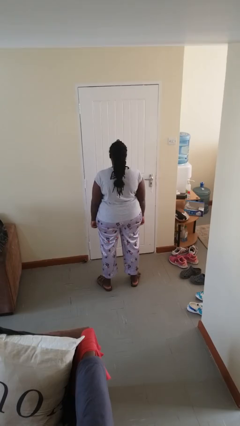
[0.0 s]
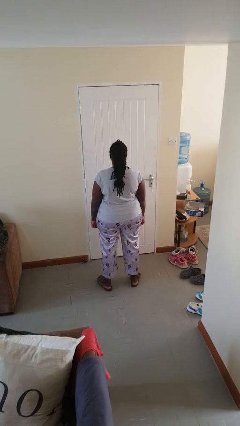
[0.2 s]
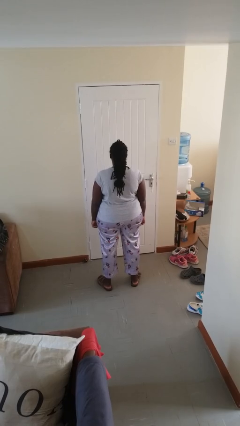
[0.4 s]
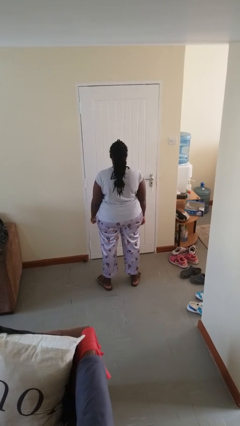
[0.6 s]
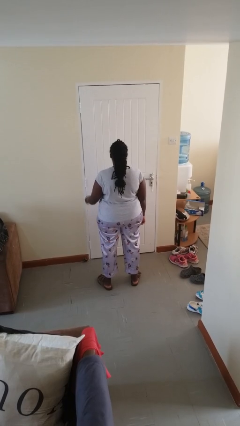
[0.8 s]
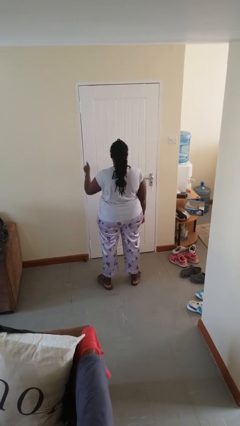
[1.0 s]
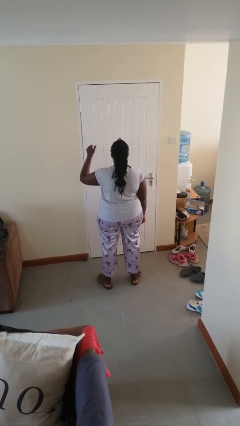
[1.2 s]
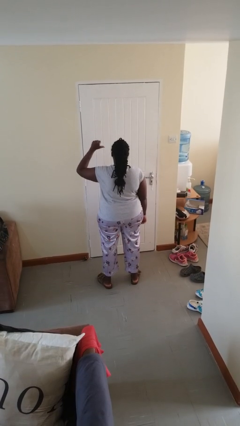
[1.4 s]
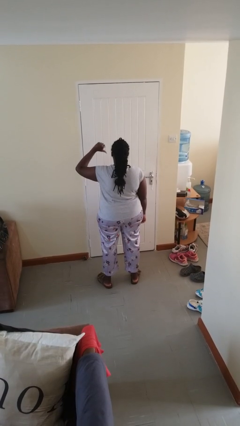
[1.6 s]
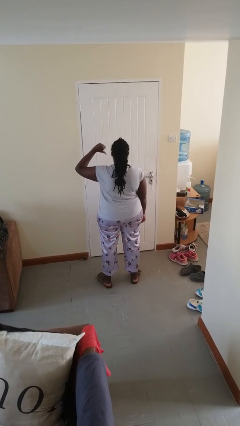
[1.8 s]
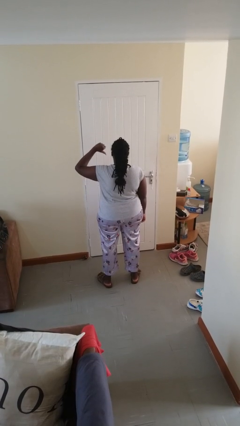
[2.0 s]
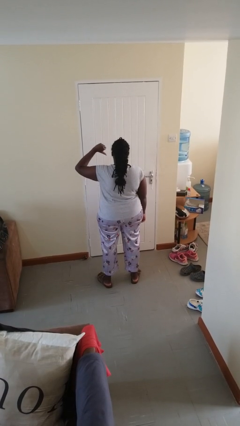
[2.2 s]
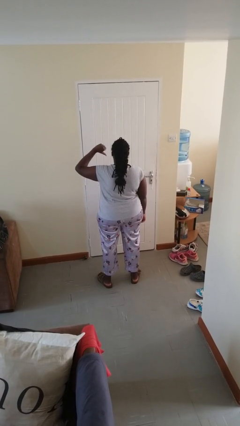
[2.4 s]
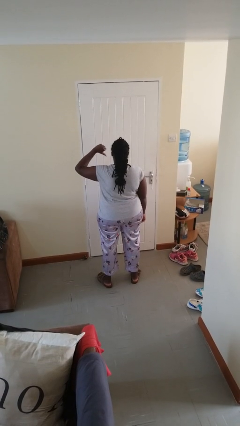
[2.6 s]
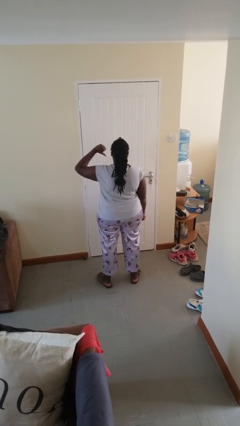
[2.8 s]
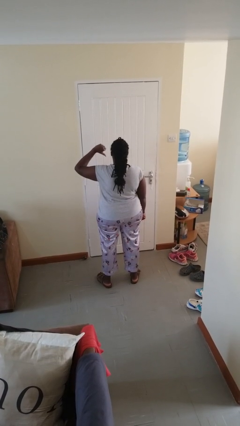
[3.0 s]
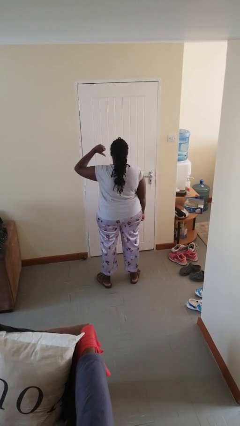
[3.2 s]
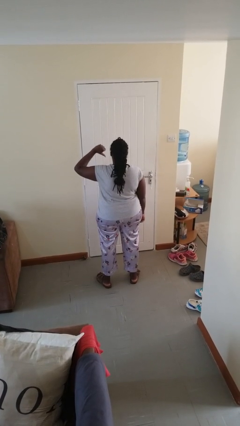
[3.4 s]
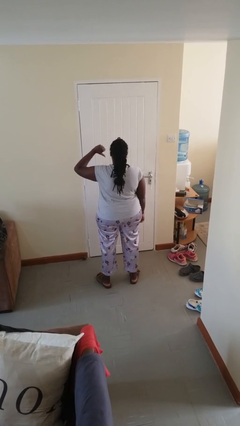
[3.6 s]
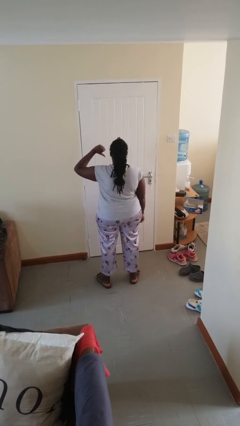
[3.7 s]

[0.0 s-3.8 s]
person gestures thumbs down

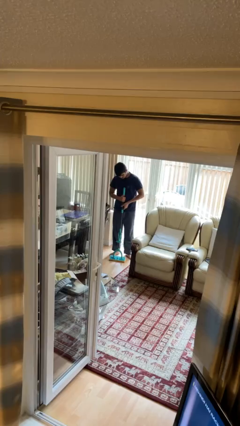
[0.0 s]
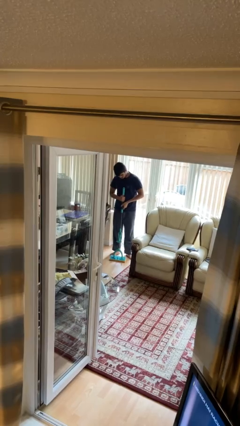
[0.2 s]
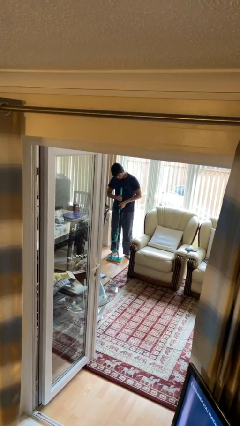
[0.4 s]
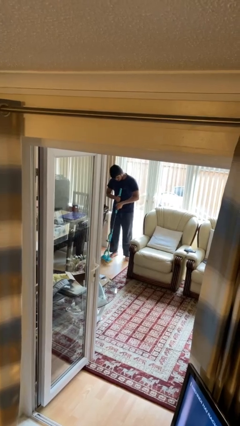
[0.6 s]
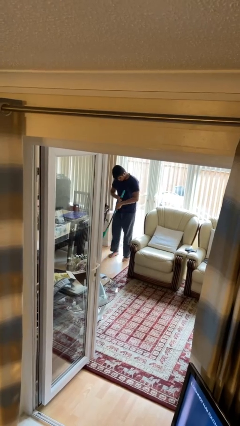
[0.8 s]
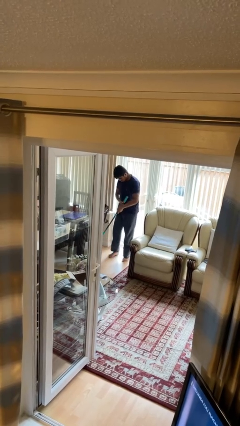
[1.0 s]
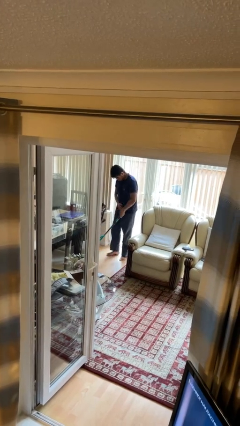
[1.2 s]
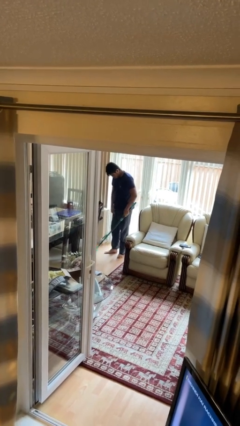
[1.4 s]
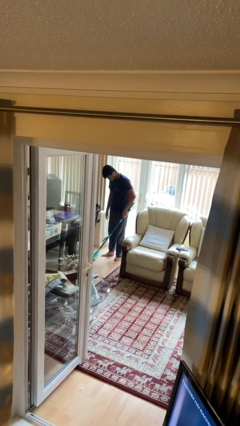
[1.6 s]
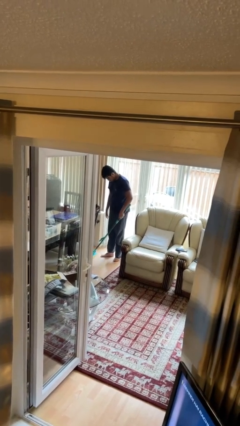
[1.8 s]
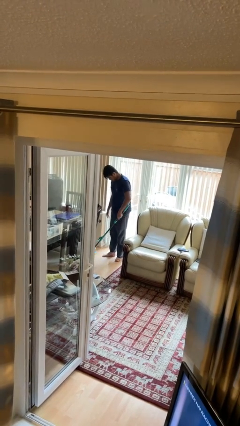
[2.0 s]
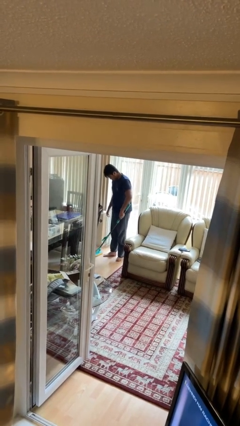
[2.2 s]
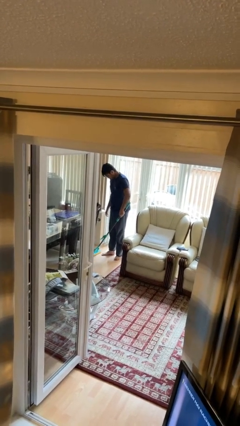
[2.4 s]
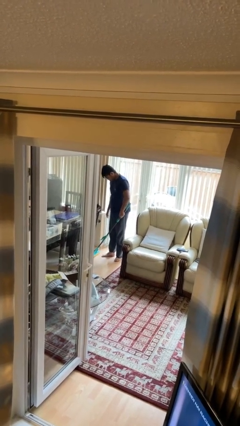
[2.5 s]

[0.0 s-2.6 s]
person mops

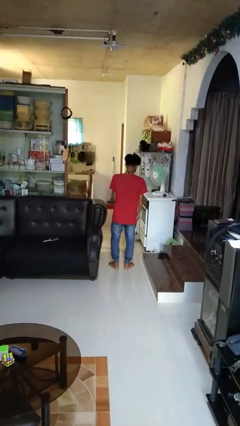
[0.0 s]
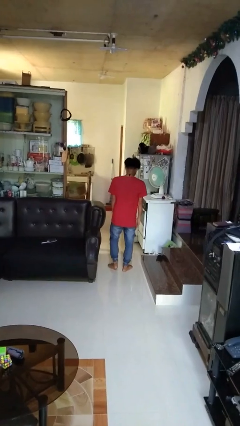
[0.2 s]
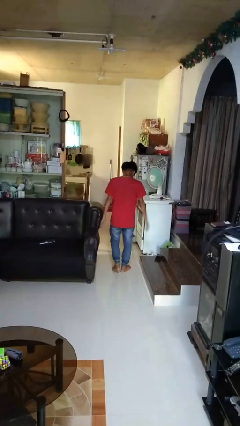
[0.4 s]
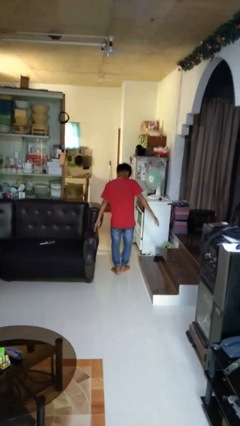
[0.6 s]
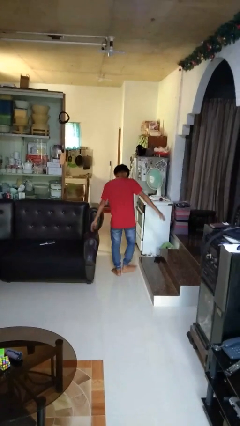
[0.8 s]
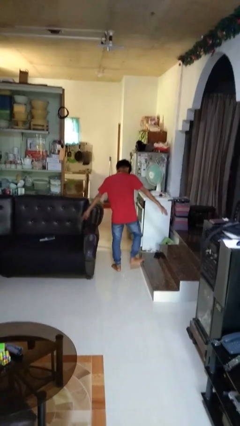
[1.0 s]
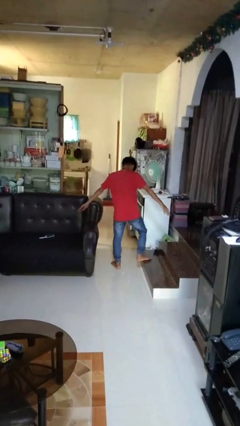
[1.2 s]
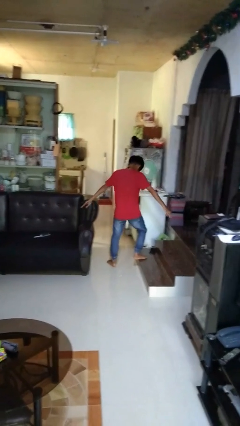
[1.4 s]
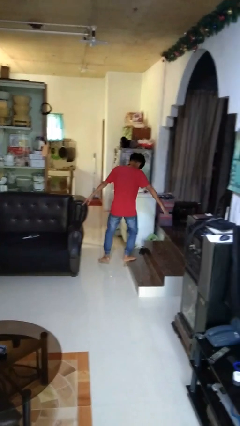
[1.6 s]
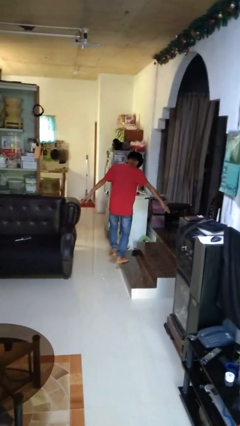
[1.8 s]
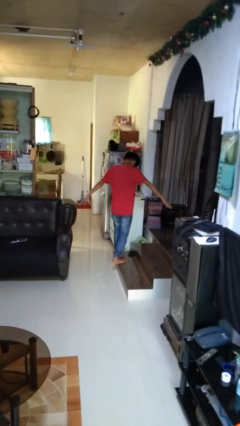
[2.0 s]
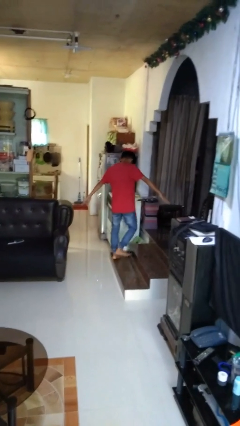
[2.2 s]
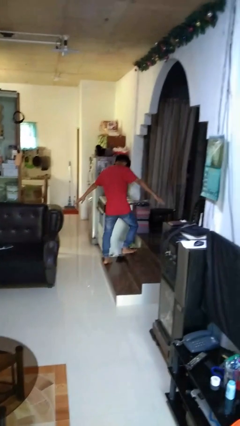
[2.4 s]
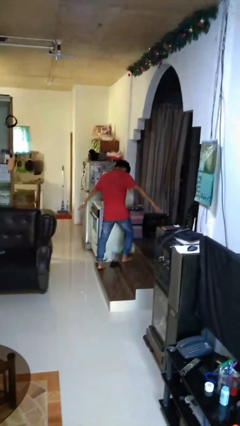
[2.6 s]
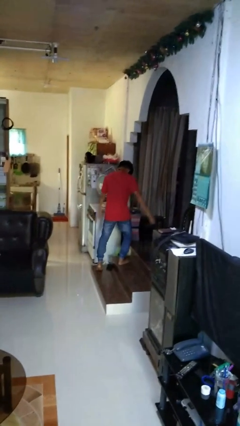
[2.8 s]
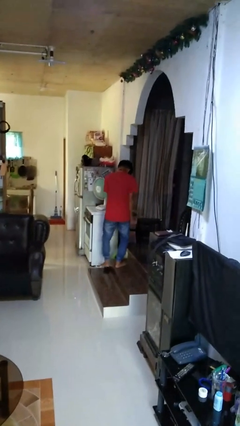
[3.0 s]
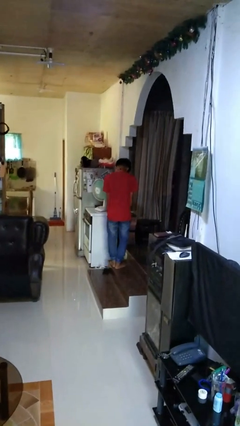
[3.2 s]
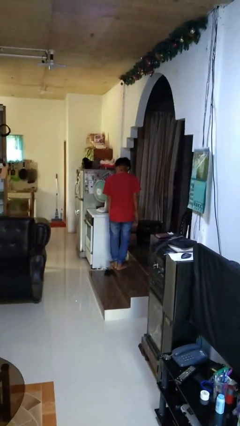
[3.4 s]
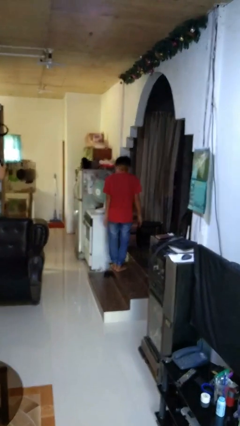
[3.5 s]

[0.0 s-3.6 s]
person walks tiptoe

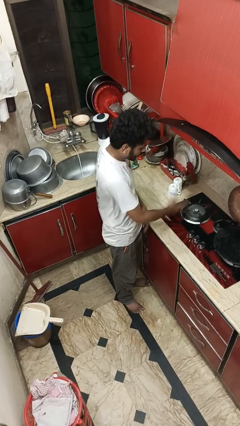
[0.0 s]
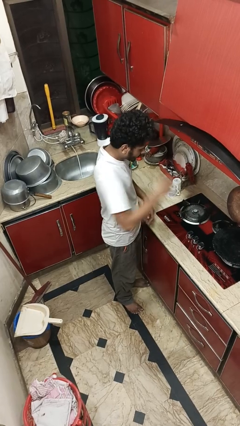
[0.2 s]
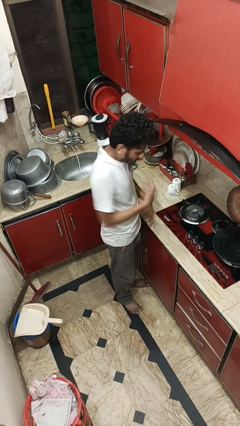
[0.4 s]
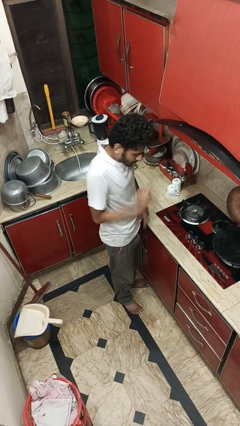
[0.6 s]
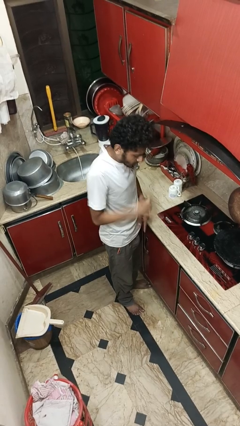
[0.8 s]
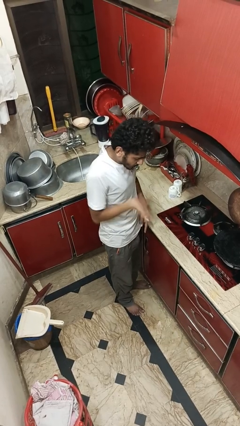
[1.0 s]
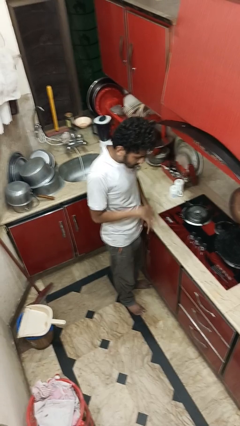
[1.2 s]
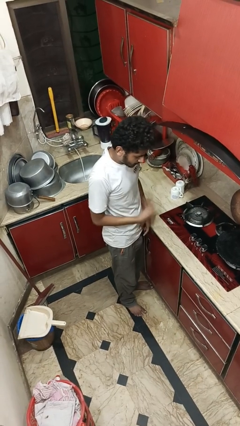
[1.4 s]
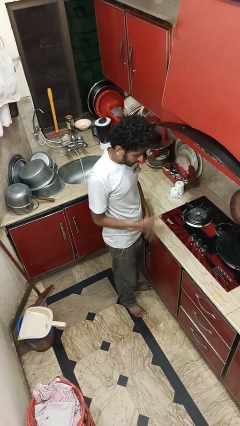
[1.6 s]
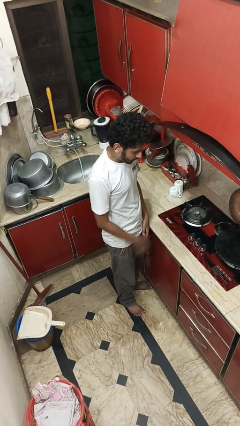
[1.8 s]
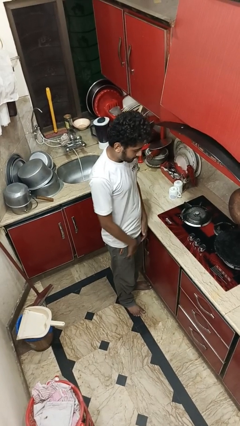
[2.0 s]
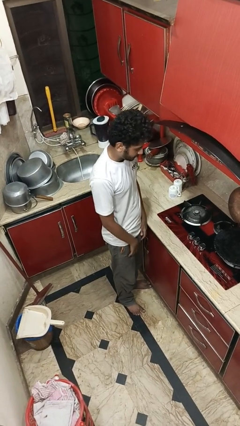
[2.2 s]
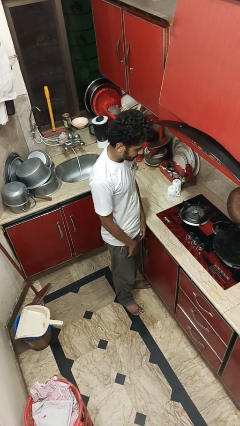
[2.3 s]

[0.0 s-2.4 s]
person burns hand

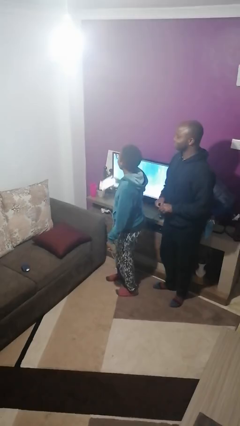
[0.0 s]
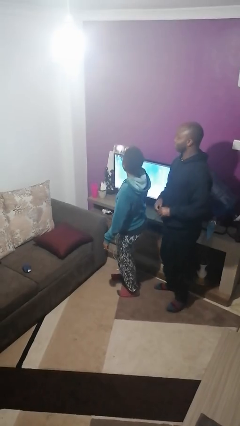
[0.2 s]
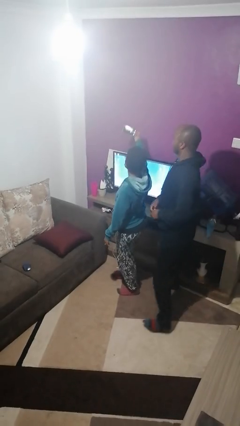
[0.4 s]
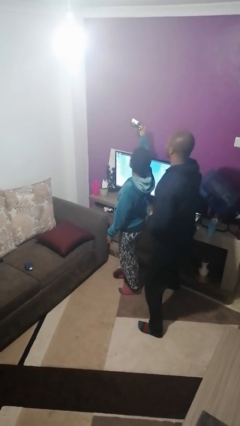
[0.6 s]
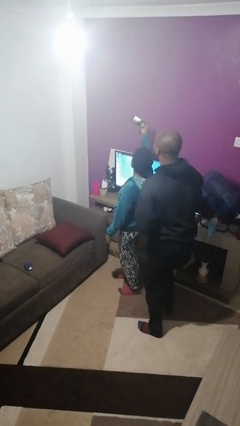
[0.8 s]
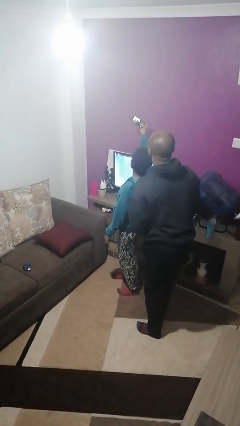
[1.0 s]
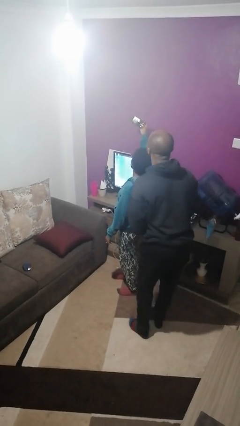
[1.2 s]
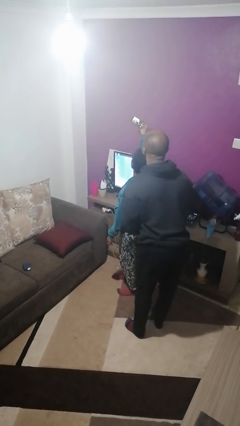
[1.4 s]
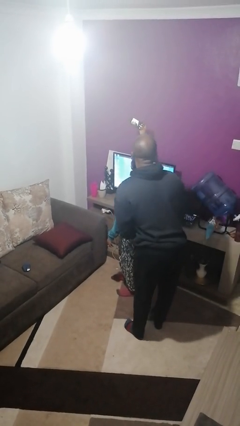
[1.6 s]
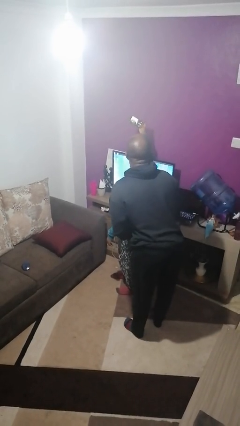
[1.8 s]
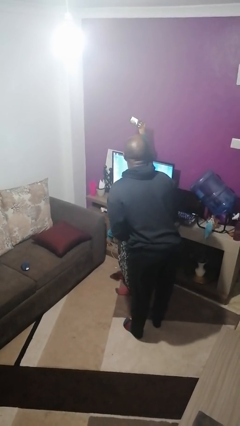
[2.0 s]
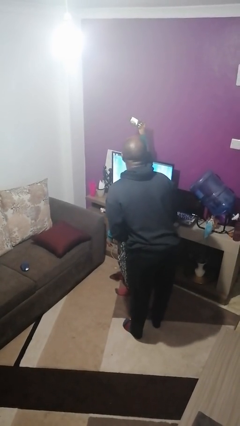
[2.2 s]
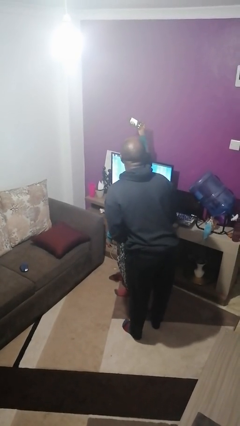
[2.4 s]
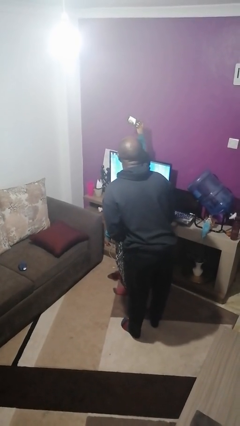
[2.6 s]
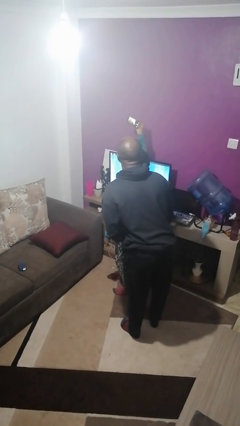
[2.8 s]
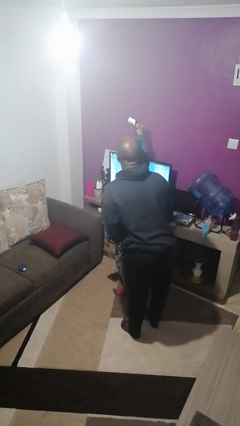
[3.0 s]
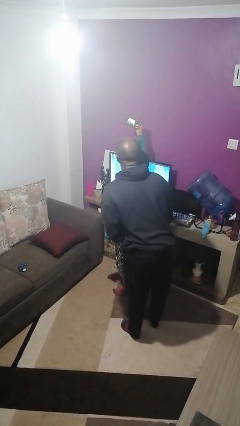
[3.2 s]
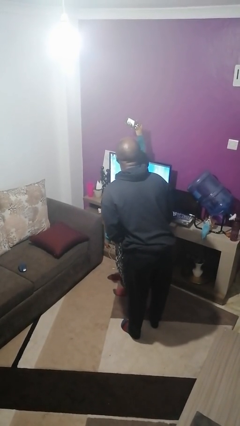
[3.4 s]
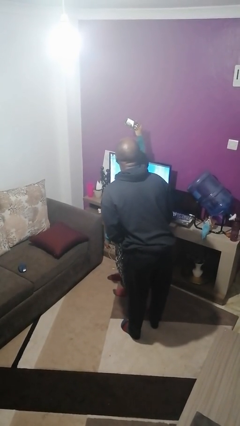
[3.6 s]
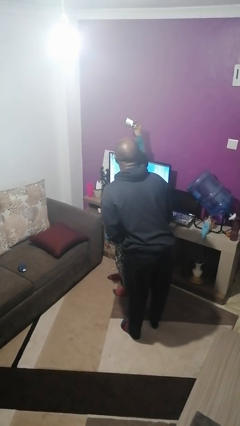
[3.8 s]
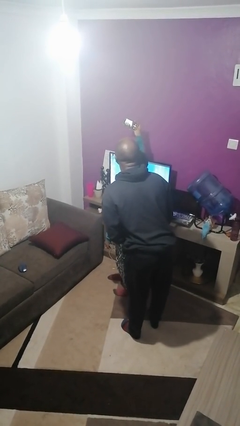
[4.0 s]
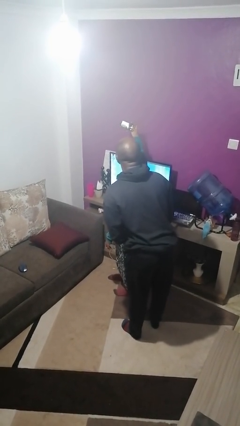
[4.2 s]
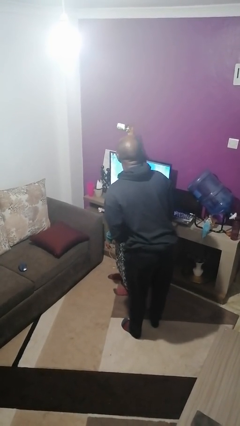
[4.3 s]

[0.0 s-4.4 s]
person takes selfie with person

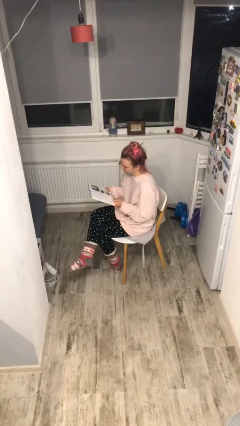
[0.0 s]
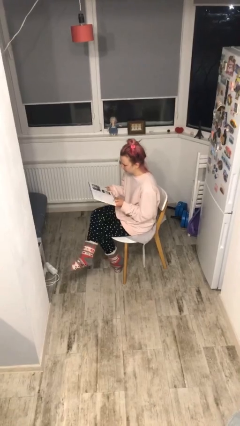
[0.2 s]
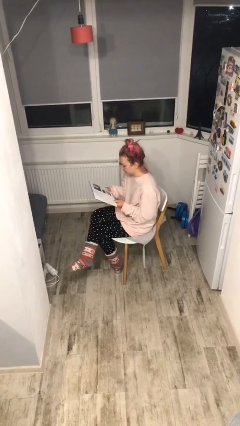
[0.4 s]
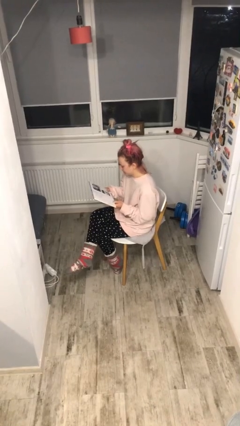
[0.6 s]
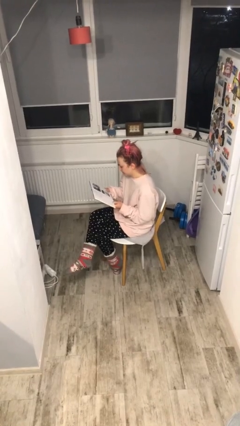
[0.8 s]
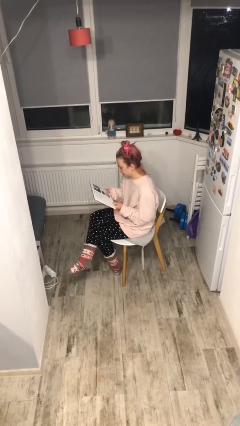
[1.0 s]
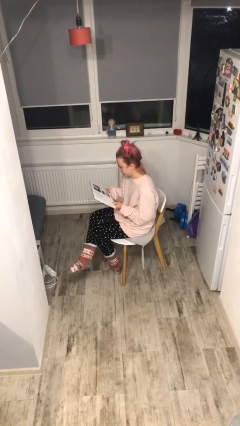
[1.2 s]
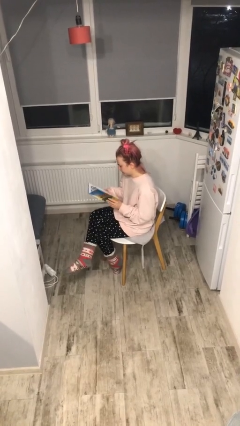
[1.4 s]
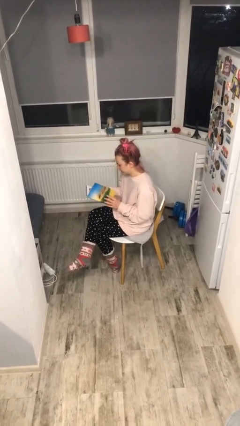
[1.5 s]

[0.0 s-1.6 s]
person reads document
